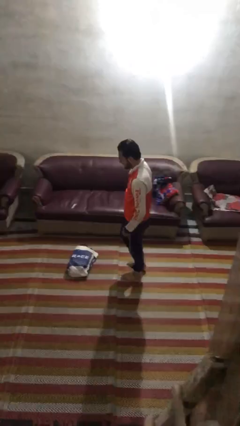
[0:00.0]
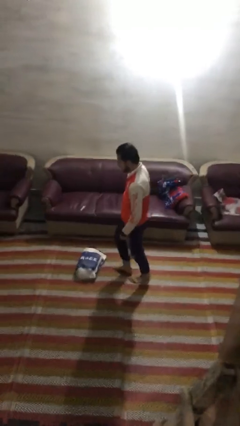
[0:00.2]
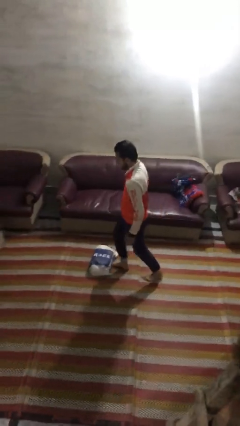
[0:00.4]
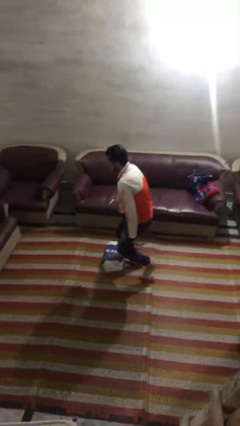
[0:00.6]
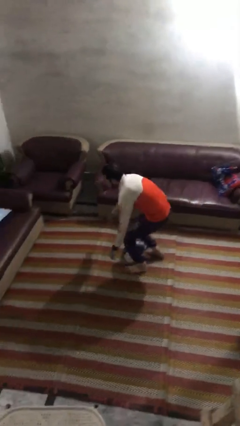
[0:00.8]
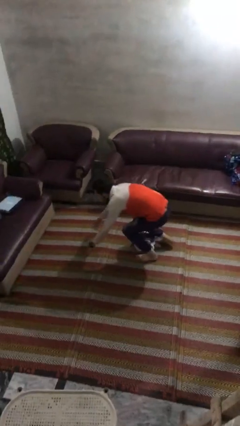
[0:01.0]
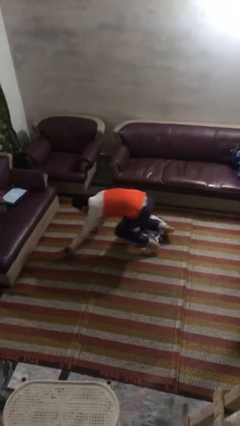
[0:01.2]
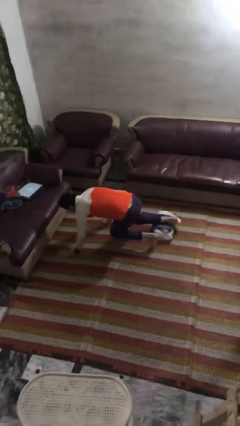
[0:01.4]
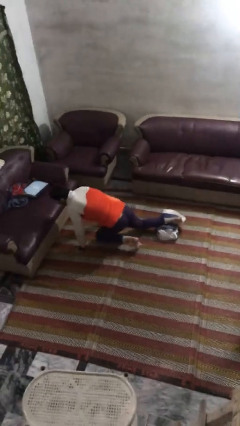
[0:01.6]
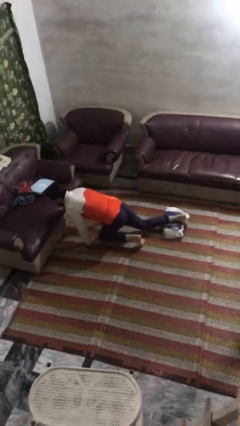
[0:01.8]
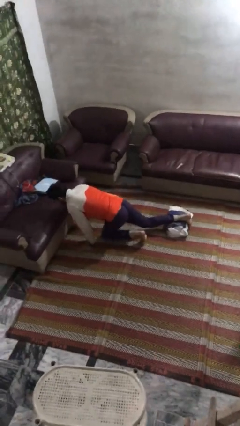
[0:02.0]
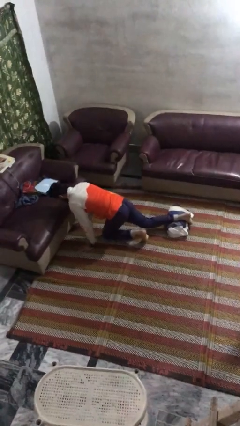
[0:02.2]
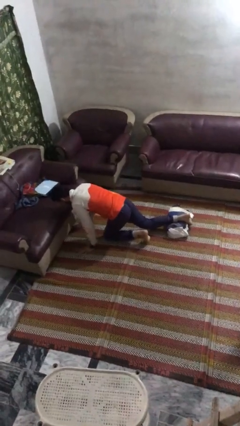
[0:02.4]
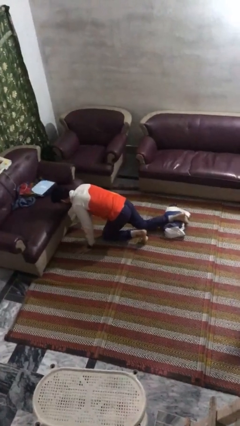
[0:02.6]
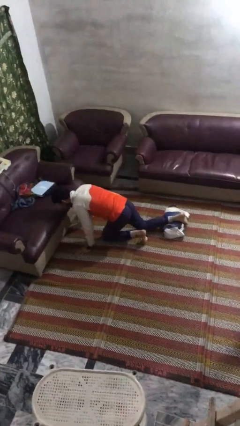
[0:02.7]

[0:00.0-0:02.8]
person trips on object on floor

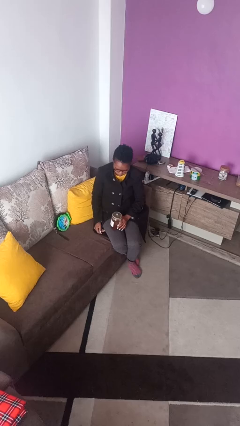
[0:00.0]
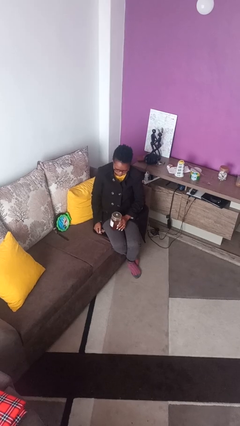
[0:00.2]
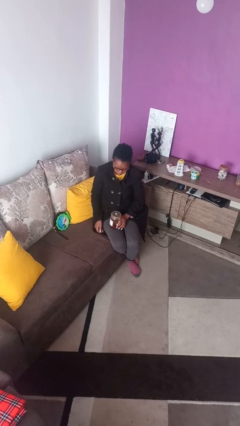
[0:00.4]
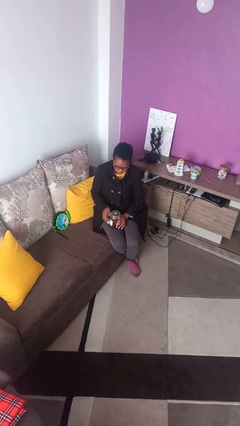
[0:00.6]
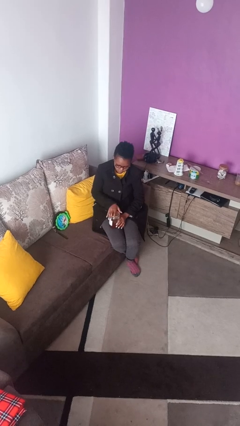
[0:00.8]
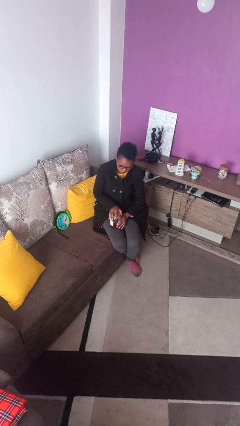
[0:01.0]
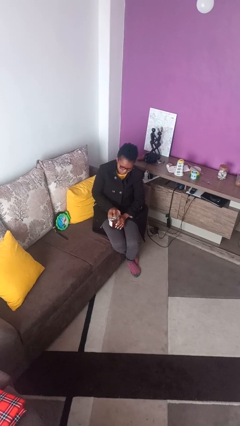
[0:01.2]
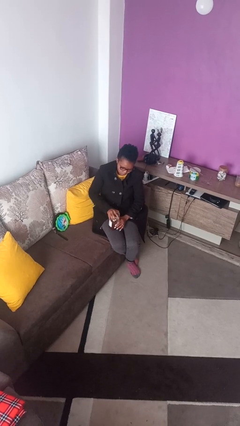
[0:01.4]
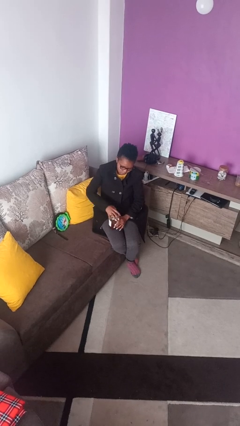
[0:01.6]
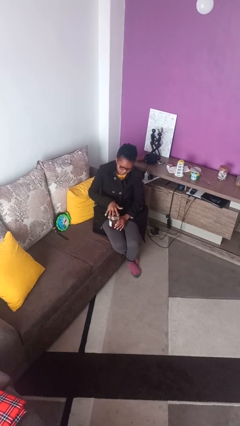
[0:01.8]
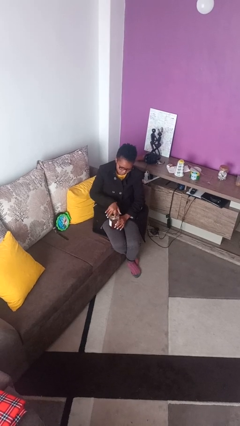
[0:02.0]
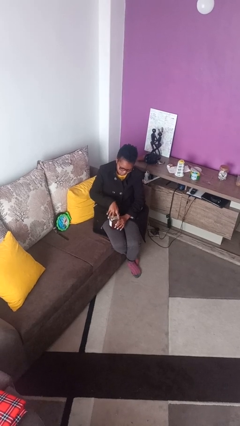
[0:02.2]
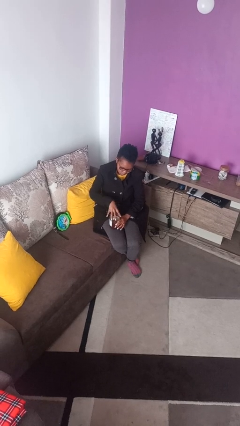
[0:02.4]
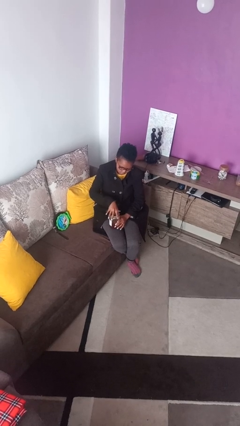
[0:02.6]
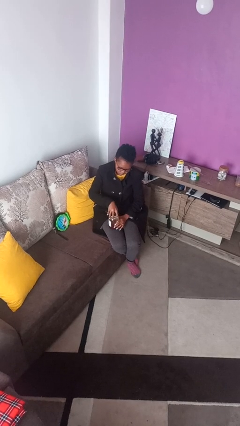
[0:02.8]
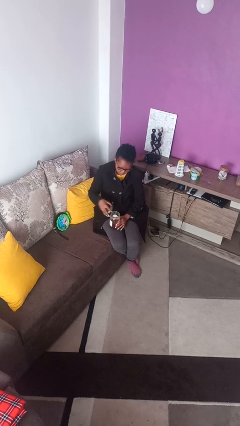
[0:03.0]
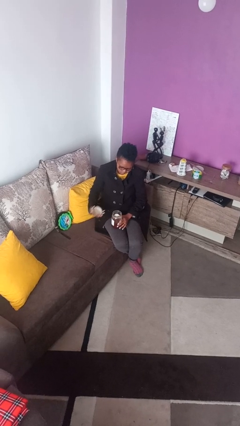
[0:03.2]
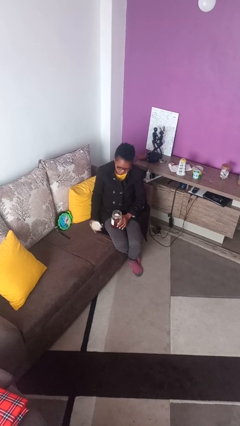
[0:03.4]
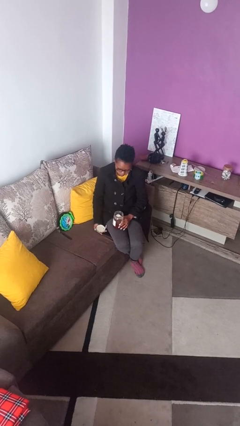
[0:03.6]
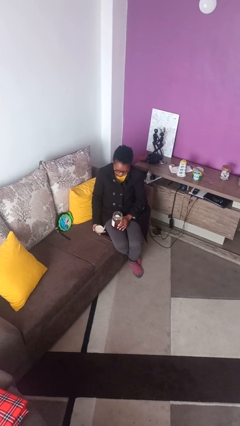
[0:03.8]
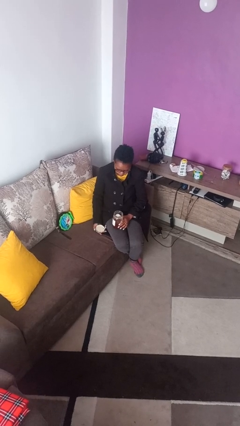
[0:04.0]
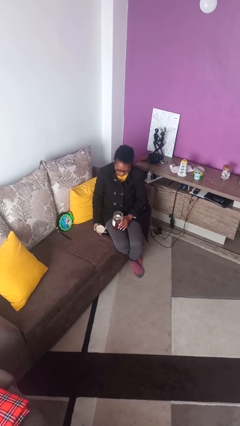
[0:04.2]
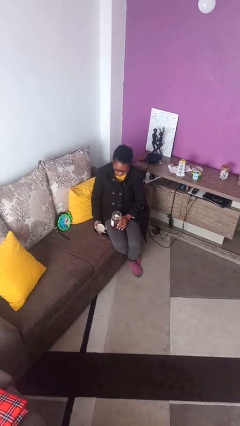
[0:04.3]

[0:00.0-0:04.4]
person opens jar

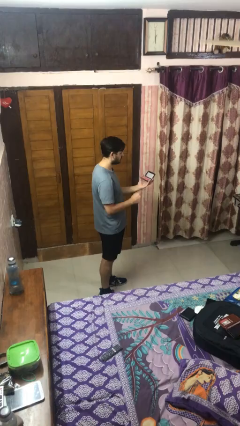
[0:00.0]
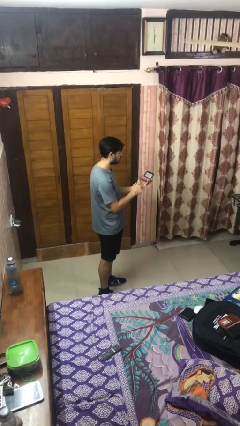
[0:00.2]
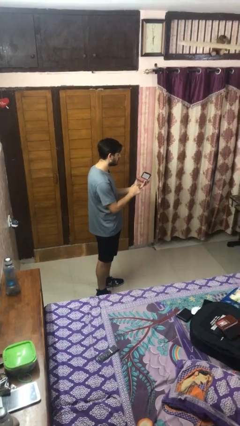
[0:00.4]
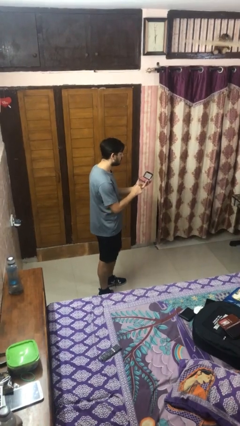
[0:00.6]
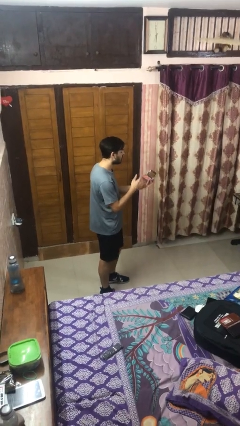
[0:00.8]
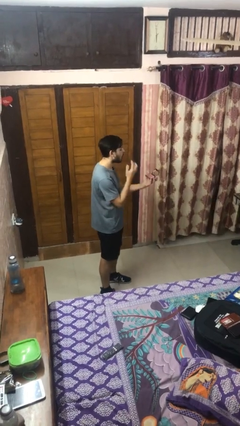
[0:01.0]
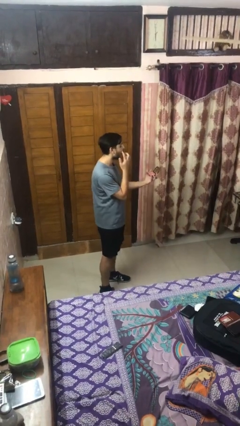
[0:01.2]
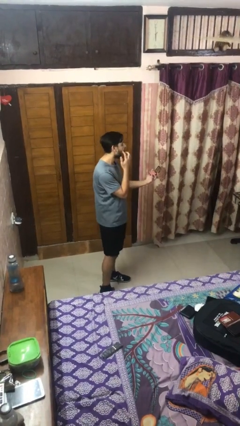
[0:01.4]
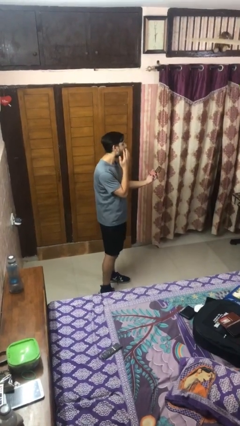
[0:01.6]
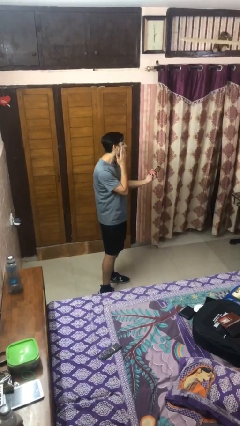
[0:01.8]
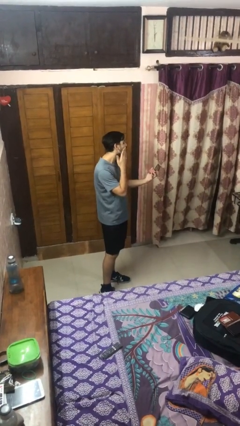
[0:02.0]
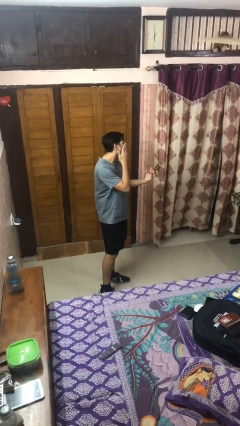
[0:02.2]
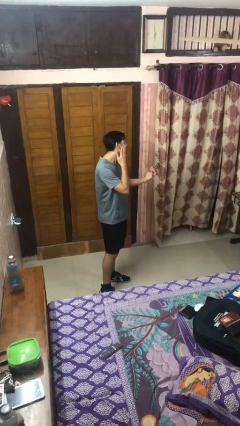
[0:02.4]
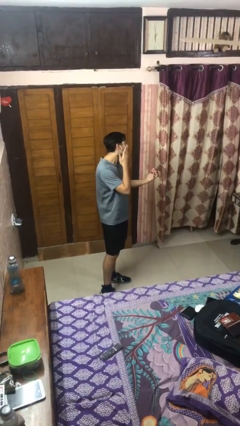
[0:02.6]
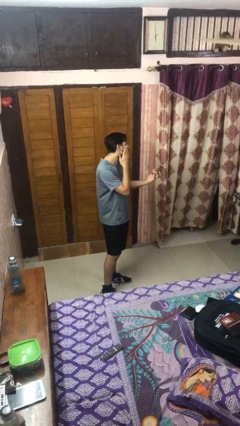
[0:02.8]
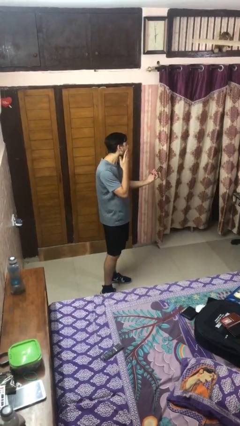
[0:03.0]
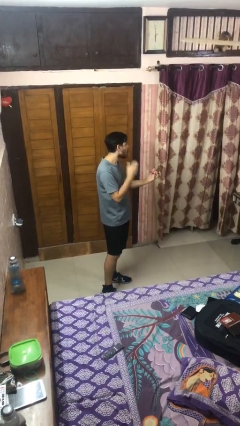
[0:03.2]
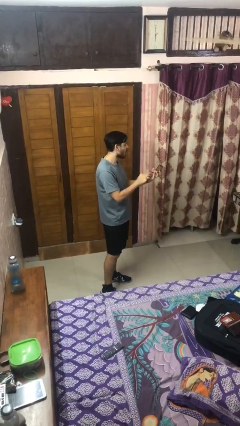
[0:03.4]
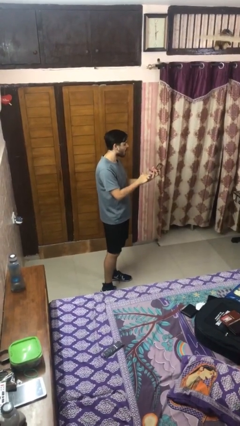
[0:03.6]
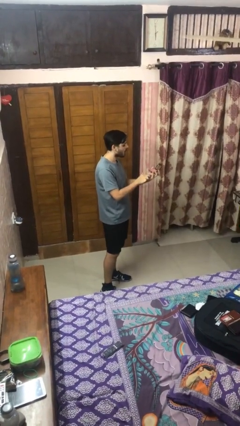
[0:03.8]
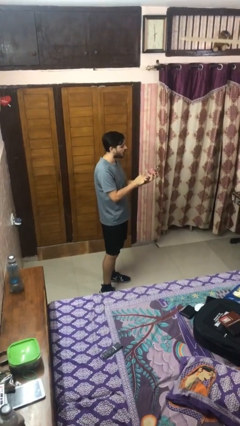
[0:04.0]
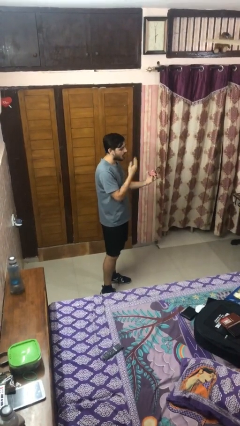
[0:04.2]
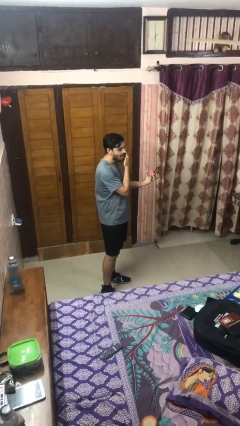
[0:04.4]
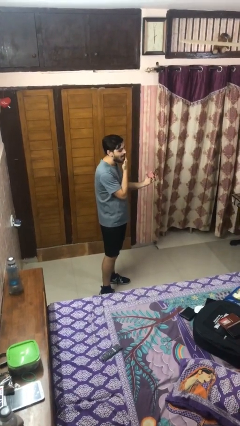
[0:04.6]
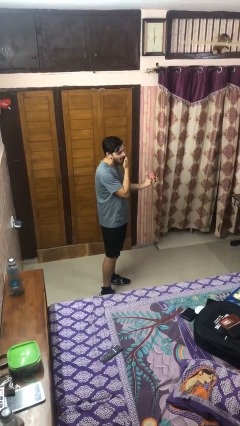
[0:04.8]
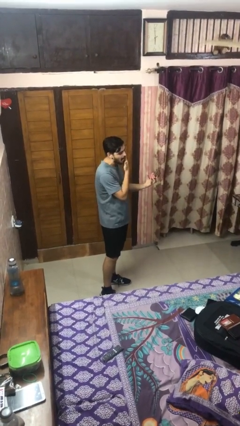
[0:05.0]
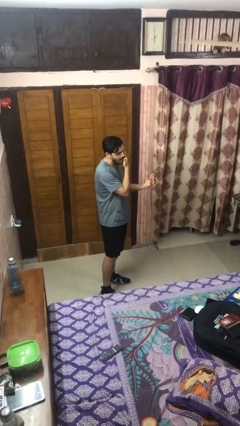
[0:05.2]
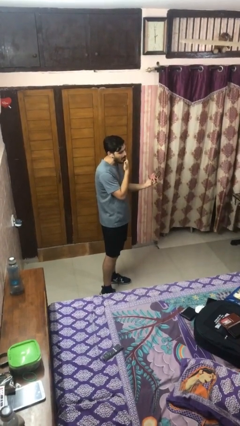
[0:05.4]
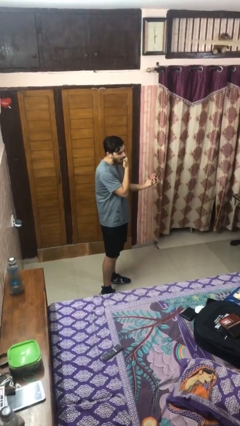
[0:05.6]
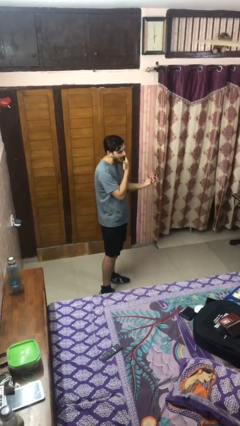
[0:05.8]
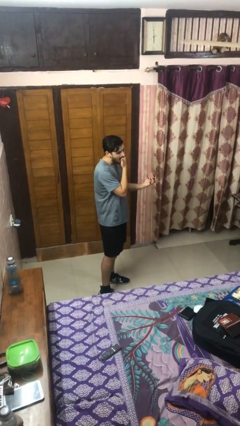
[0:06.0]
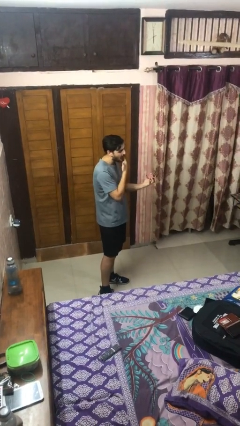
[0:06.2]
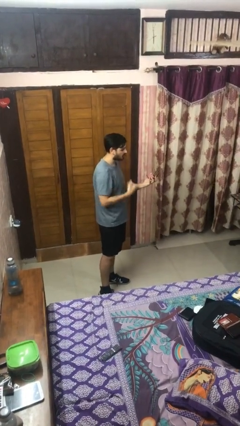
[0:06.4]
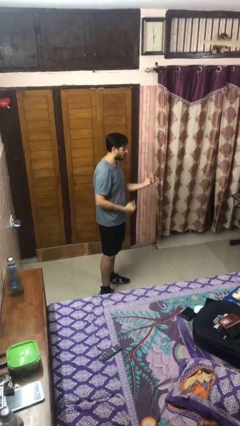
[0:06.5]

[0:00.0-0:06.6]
person applies foundation makeup

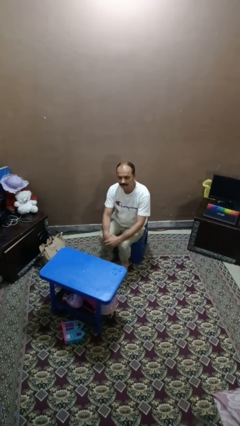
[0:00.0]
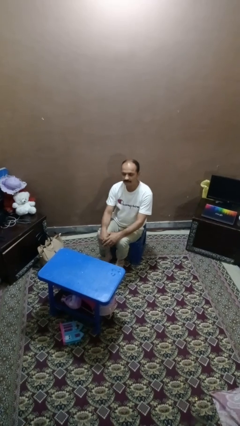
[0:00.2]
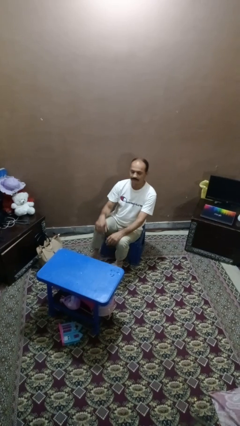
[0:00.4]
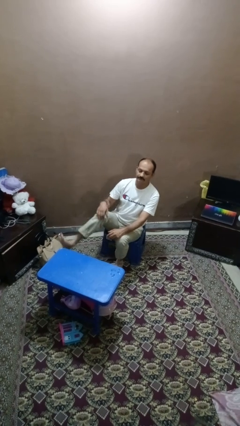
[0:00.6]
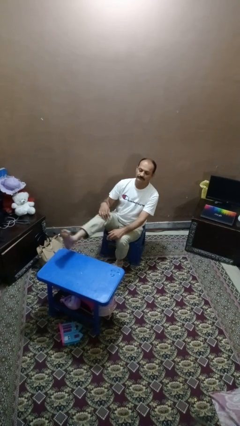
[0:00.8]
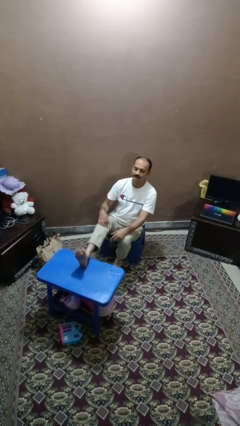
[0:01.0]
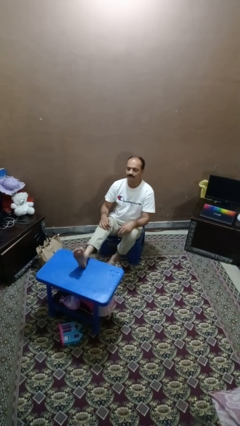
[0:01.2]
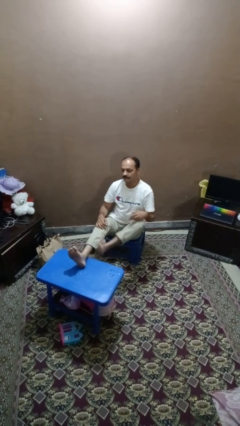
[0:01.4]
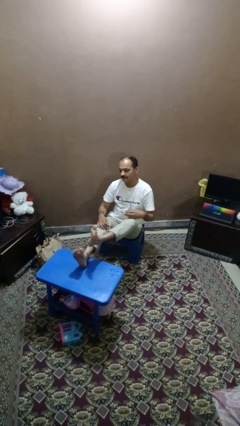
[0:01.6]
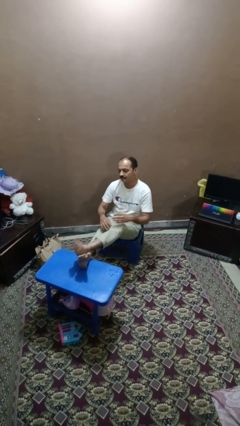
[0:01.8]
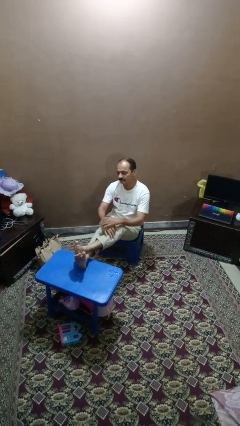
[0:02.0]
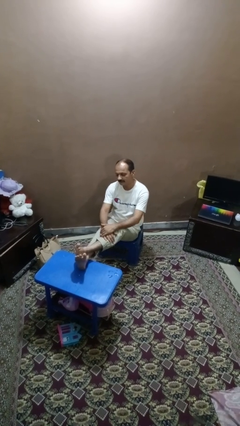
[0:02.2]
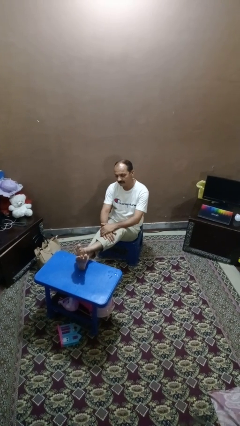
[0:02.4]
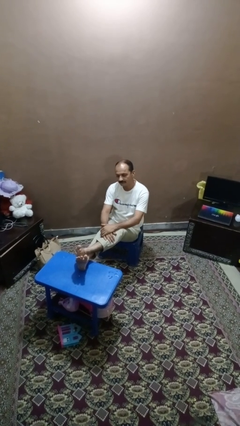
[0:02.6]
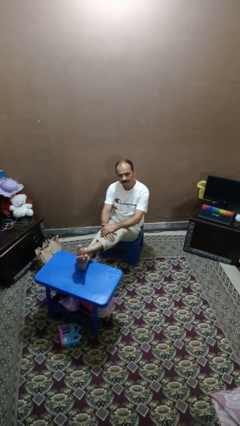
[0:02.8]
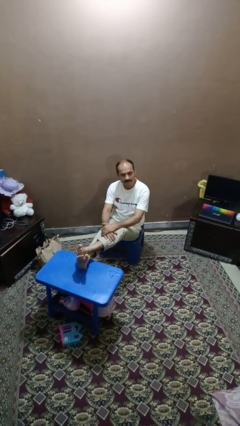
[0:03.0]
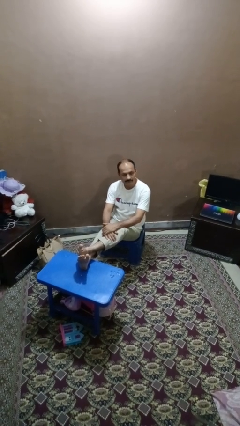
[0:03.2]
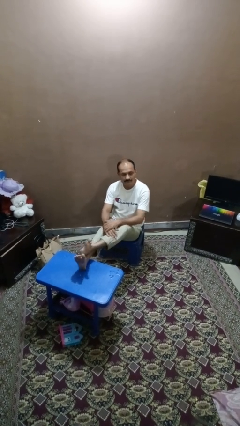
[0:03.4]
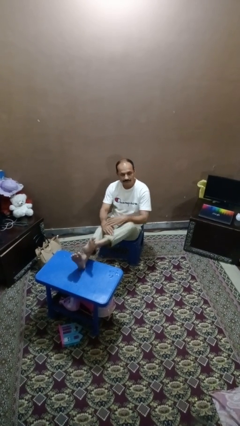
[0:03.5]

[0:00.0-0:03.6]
person puts feet up
